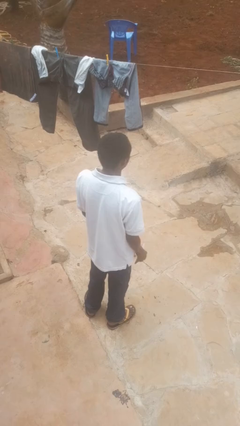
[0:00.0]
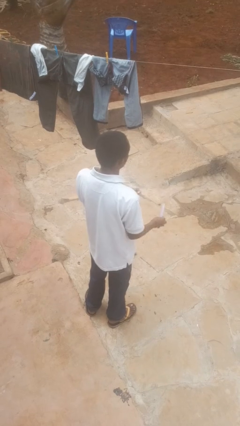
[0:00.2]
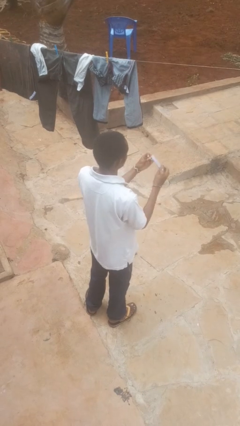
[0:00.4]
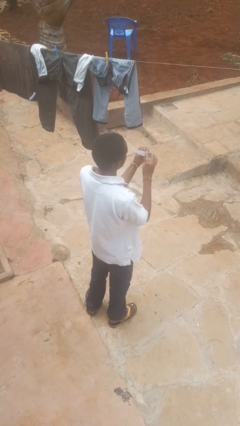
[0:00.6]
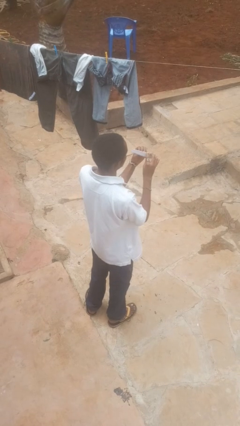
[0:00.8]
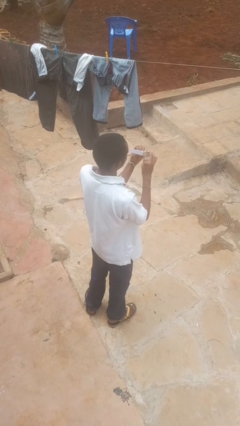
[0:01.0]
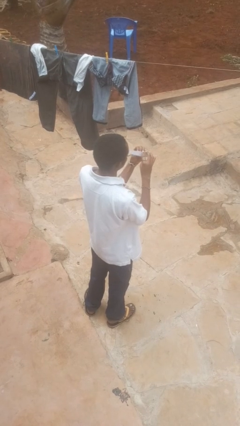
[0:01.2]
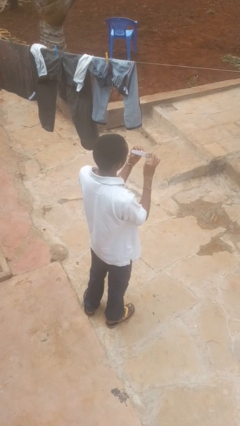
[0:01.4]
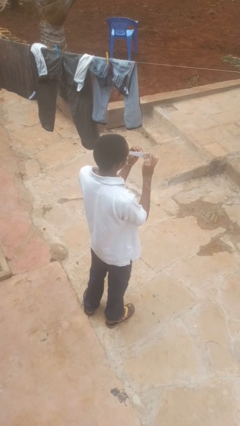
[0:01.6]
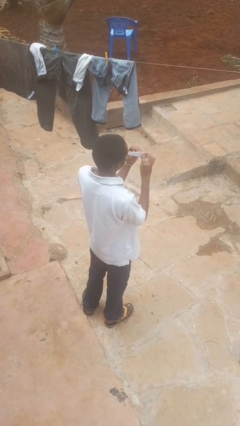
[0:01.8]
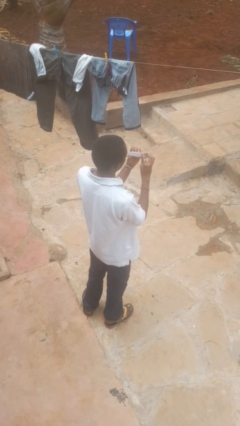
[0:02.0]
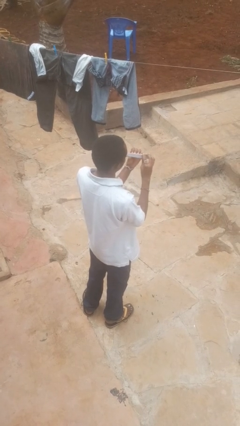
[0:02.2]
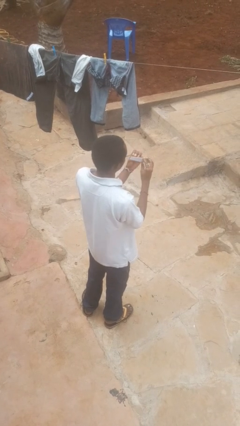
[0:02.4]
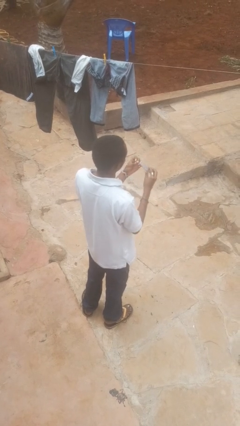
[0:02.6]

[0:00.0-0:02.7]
person files fingernails

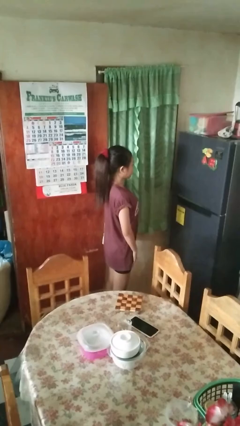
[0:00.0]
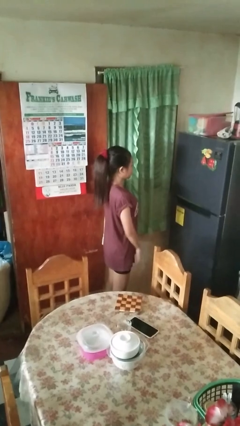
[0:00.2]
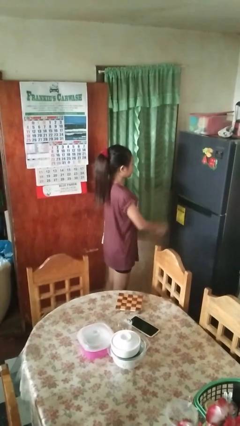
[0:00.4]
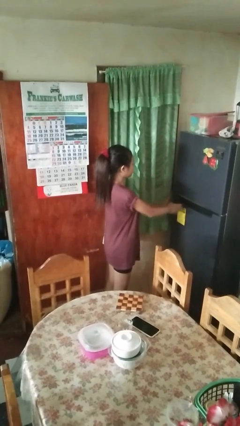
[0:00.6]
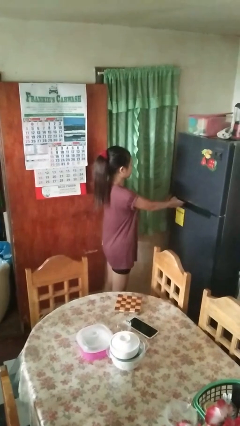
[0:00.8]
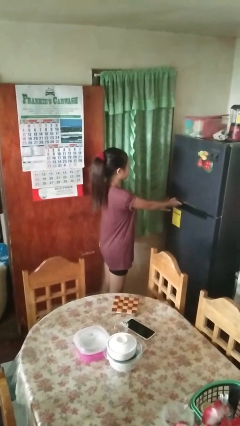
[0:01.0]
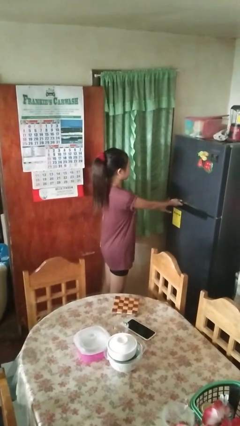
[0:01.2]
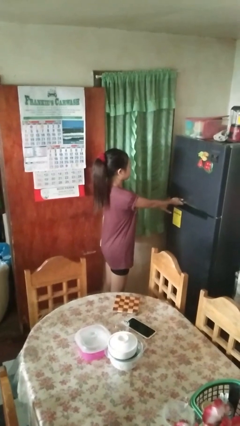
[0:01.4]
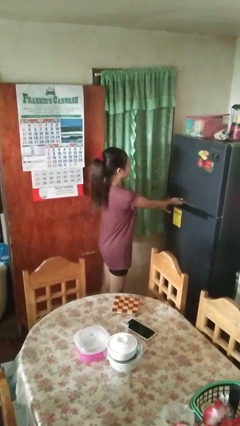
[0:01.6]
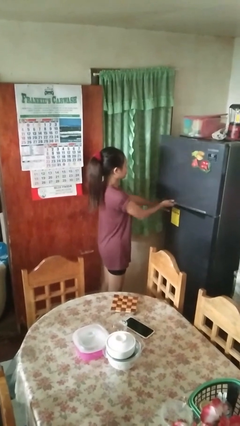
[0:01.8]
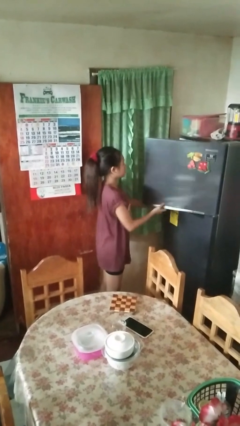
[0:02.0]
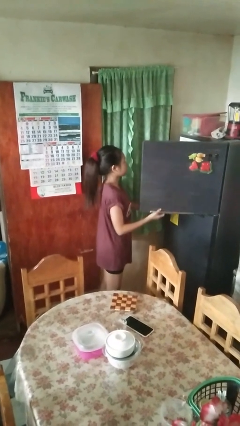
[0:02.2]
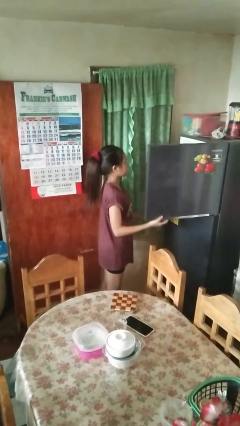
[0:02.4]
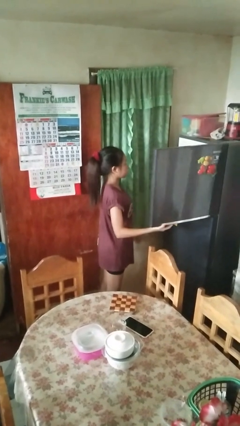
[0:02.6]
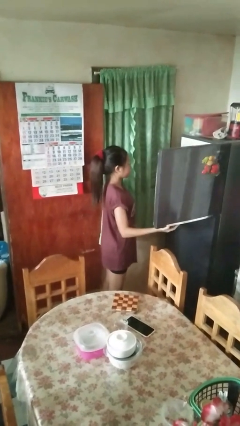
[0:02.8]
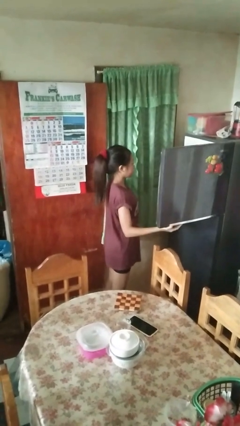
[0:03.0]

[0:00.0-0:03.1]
person opens refrigerator

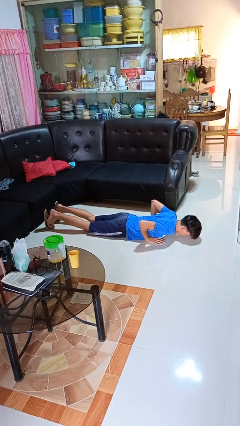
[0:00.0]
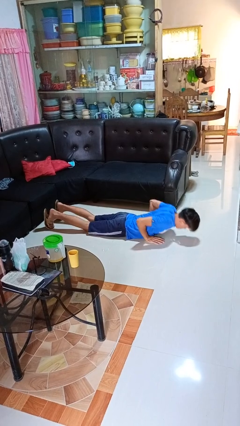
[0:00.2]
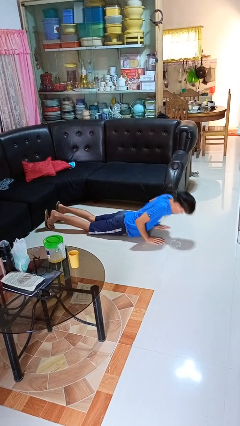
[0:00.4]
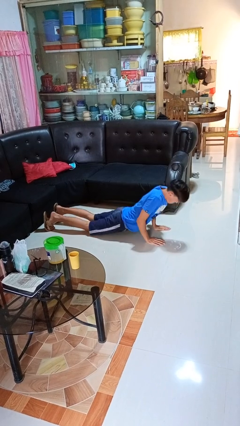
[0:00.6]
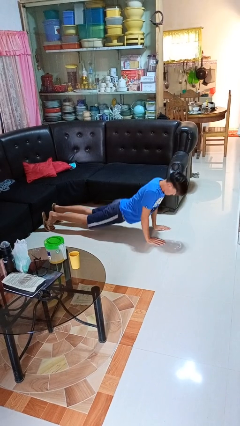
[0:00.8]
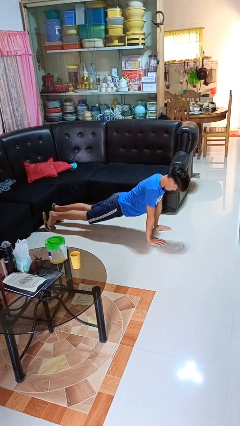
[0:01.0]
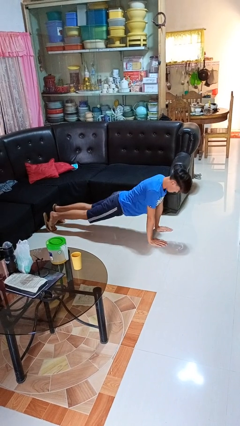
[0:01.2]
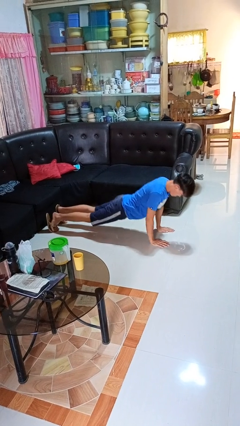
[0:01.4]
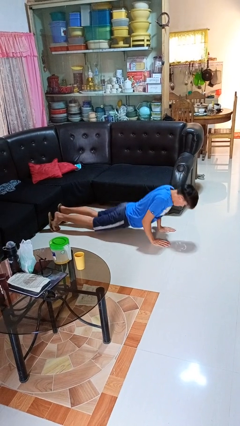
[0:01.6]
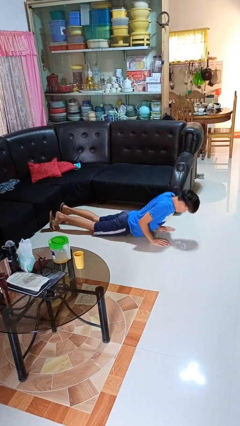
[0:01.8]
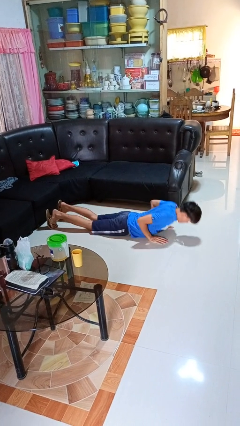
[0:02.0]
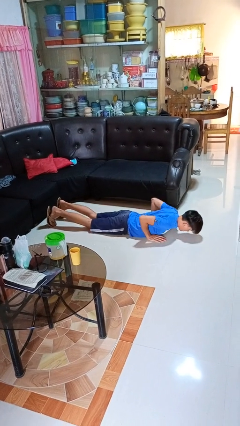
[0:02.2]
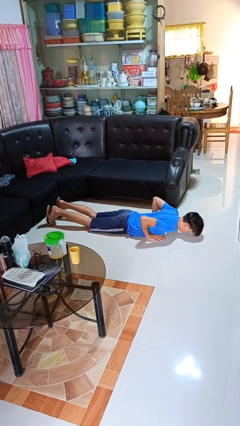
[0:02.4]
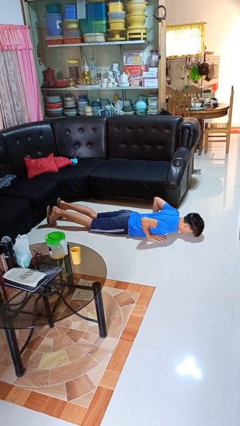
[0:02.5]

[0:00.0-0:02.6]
person exercises with pushup

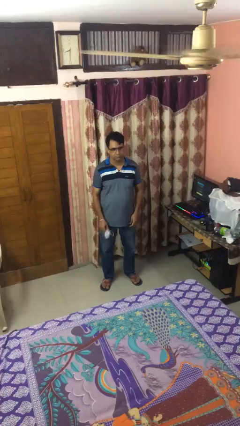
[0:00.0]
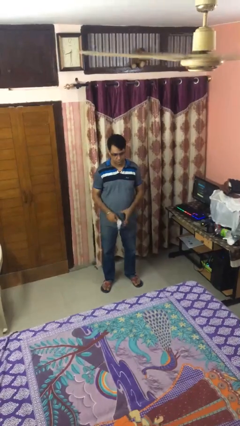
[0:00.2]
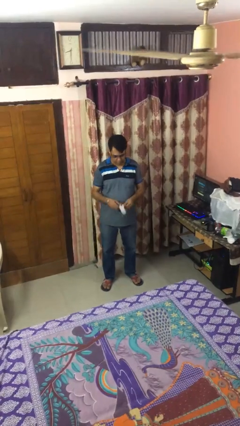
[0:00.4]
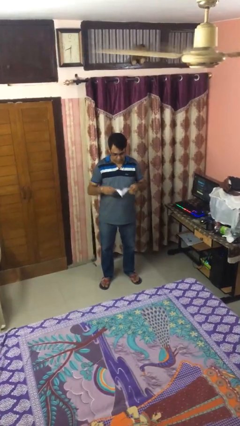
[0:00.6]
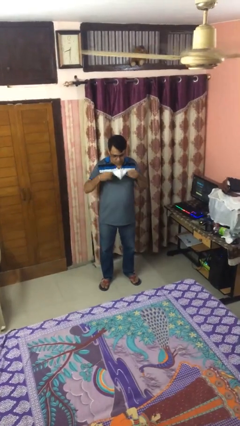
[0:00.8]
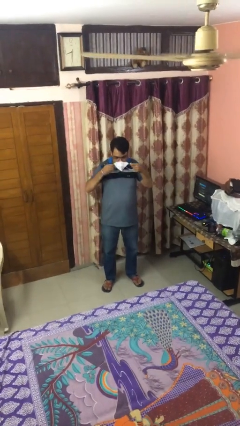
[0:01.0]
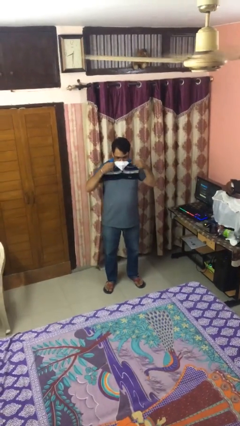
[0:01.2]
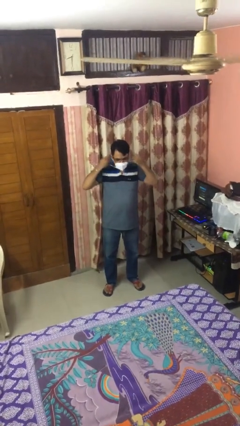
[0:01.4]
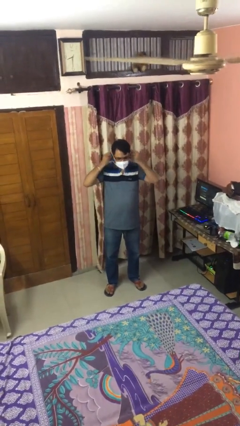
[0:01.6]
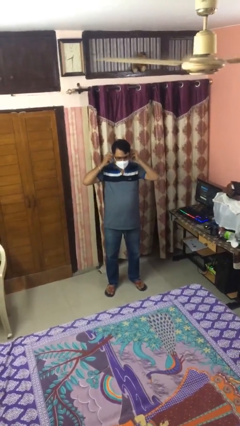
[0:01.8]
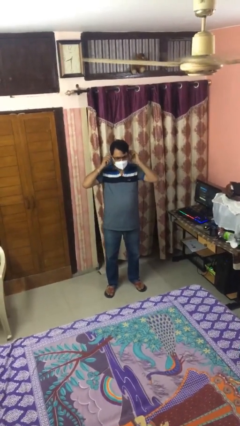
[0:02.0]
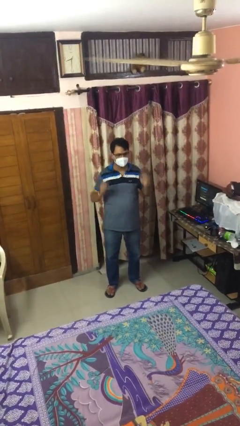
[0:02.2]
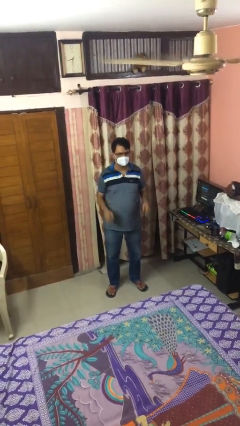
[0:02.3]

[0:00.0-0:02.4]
person puts on facemask

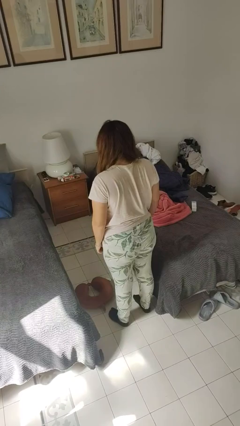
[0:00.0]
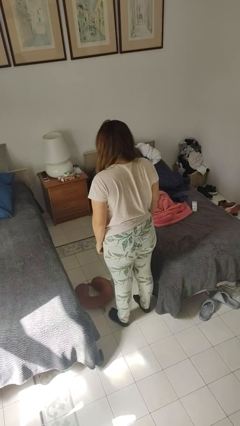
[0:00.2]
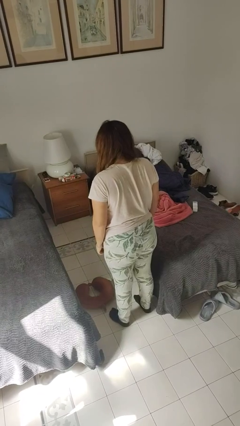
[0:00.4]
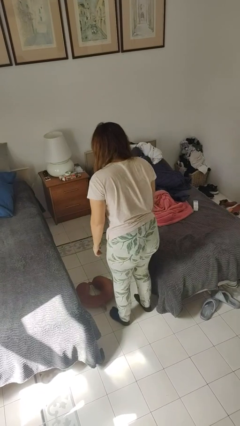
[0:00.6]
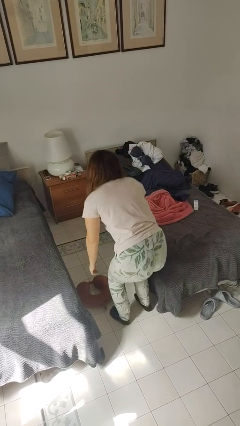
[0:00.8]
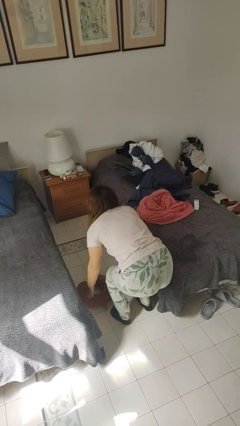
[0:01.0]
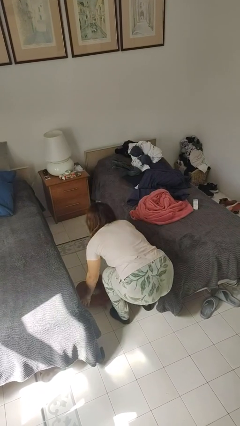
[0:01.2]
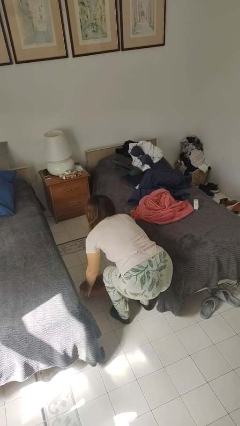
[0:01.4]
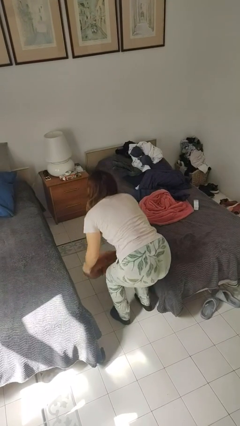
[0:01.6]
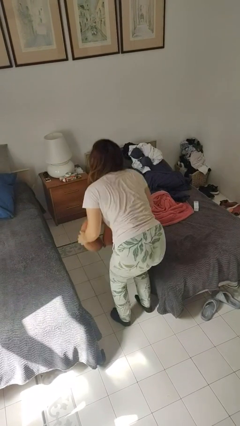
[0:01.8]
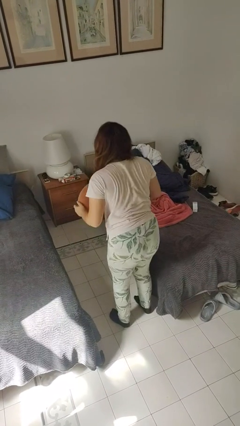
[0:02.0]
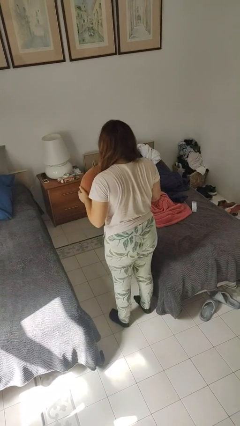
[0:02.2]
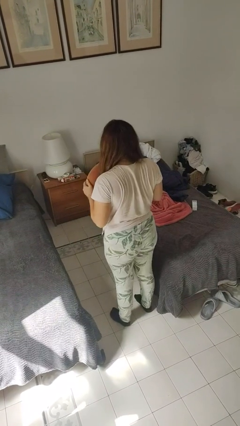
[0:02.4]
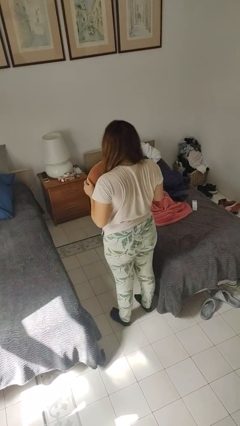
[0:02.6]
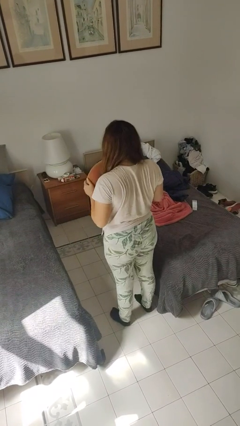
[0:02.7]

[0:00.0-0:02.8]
person picks up object from floor

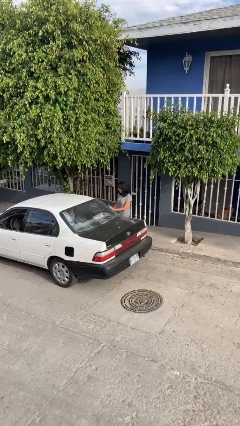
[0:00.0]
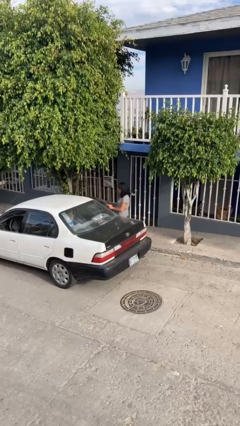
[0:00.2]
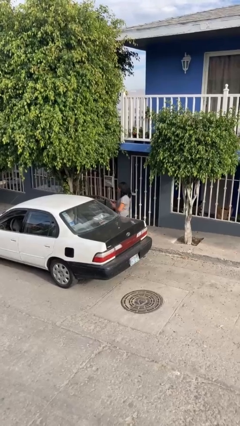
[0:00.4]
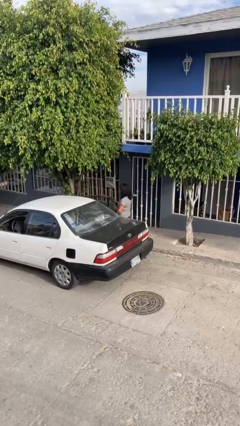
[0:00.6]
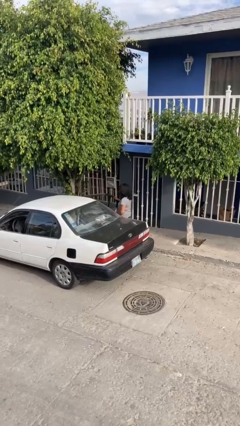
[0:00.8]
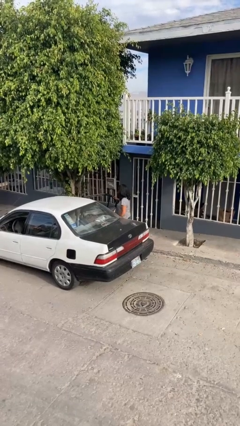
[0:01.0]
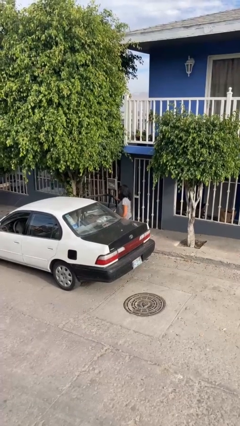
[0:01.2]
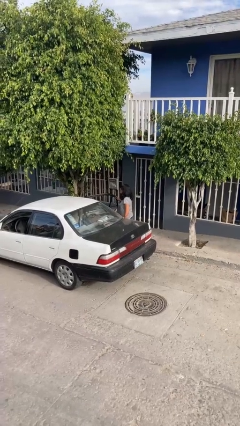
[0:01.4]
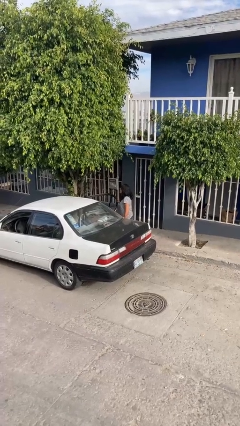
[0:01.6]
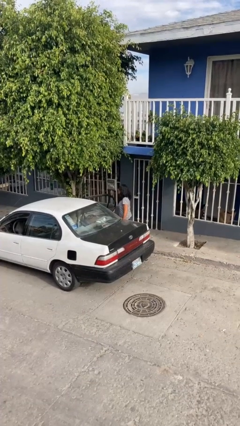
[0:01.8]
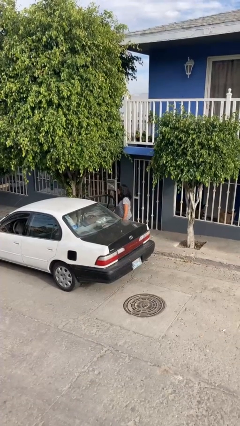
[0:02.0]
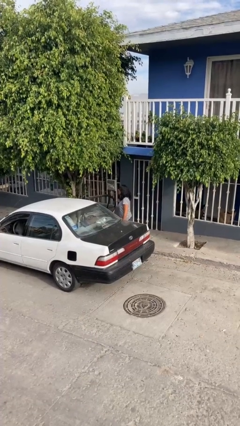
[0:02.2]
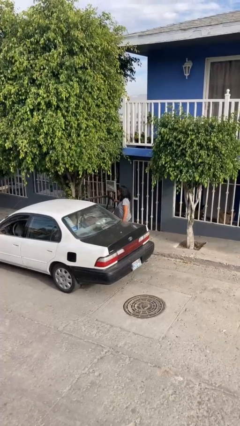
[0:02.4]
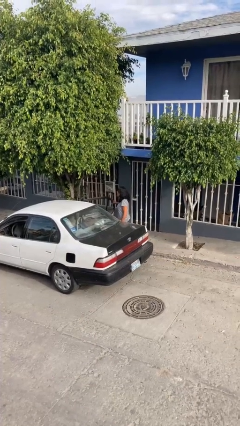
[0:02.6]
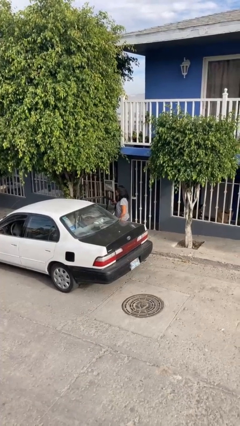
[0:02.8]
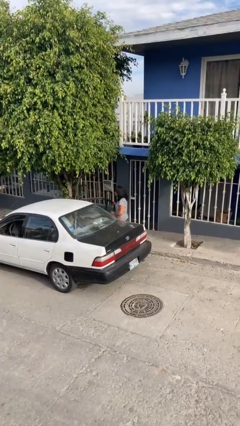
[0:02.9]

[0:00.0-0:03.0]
person opens car door

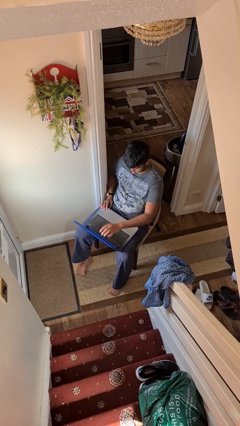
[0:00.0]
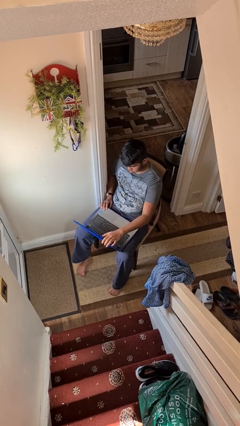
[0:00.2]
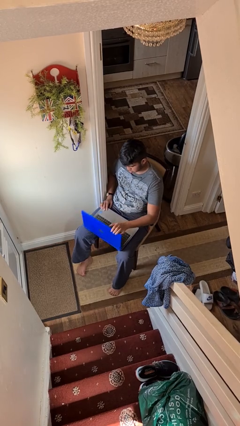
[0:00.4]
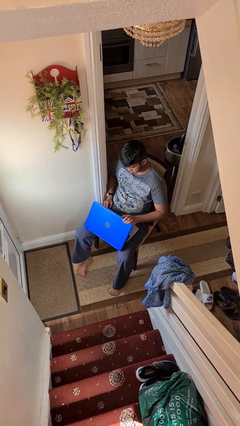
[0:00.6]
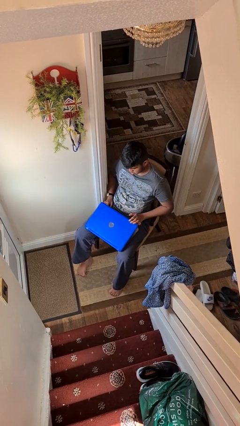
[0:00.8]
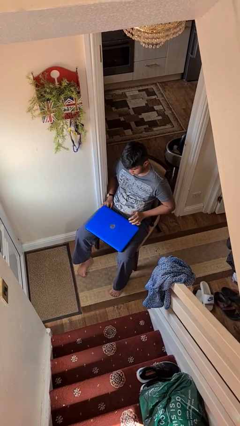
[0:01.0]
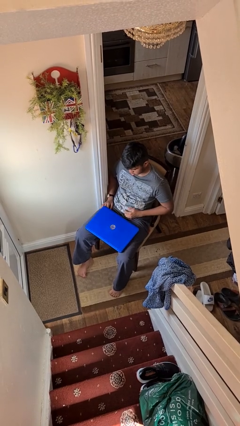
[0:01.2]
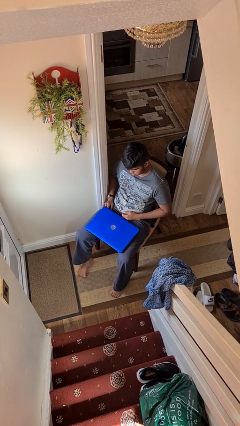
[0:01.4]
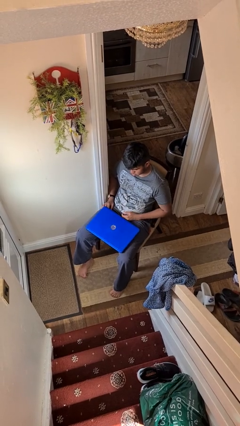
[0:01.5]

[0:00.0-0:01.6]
person closes laptop
